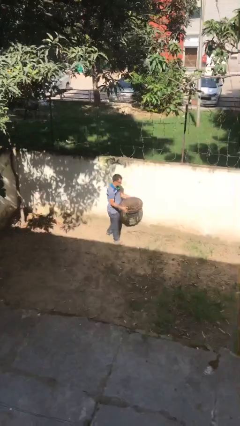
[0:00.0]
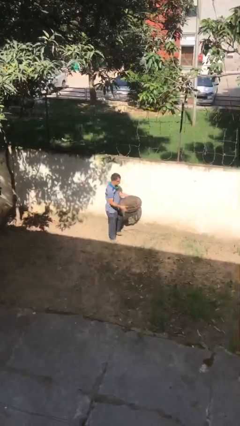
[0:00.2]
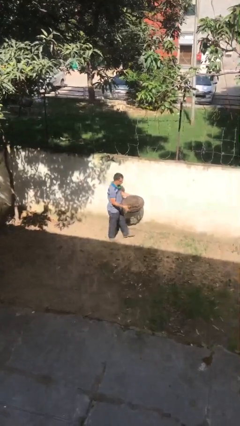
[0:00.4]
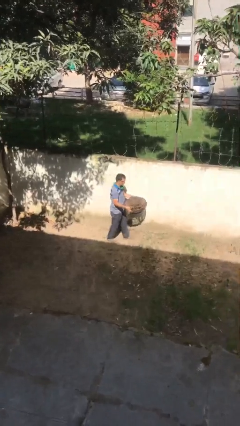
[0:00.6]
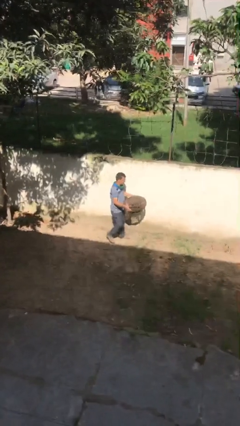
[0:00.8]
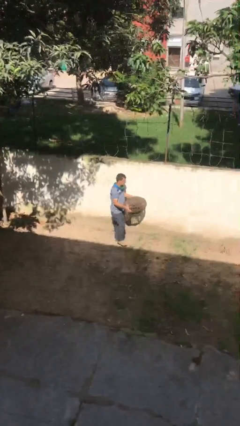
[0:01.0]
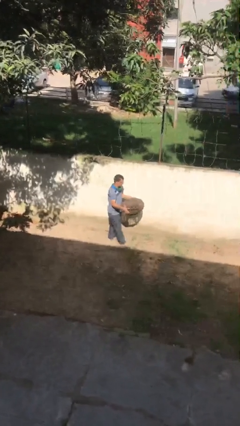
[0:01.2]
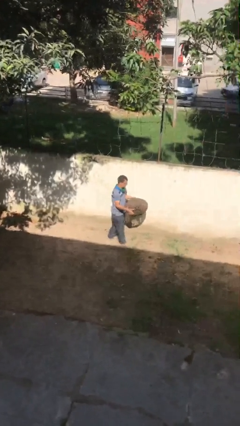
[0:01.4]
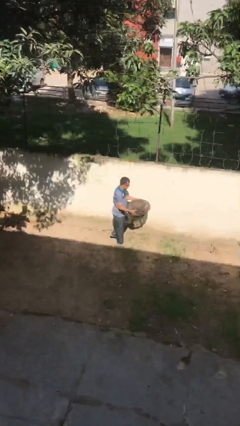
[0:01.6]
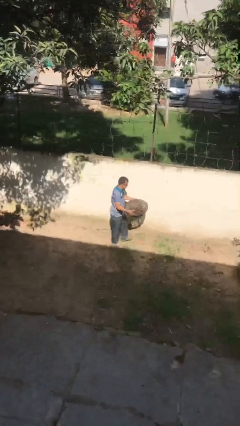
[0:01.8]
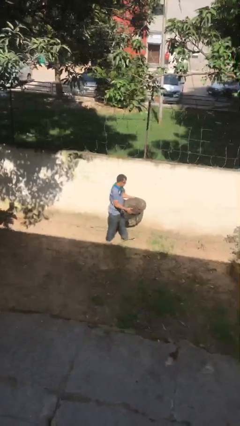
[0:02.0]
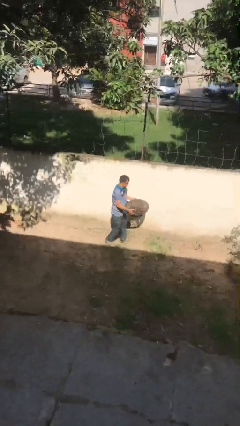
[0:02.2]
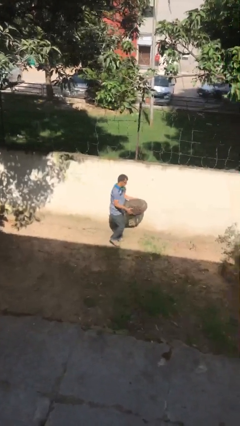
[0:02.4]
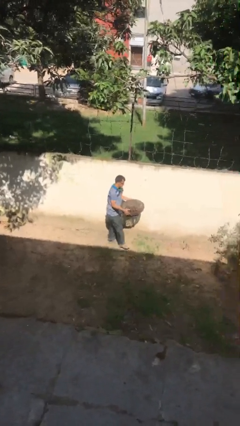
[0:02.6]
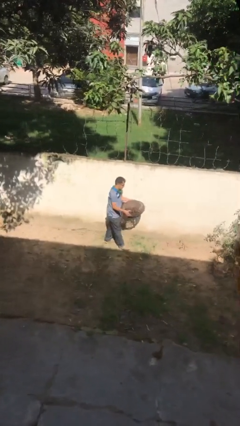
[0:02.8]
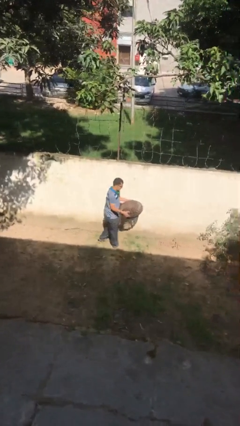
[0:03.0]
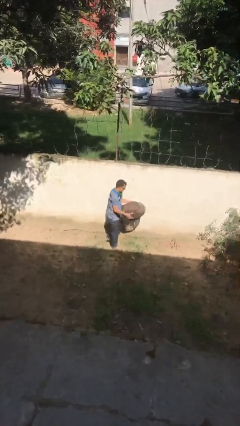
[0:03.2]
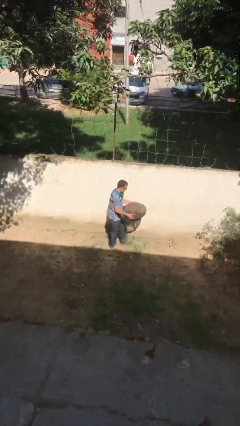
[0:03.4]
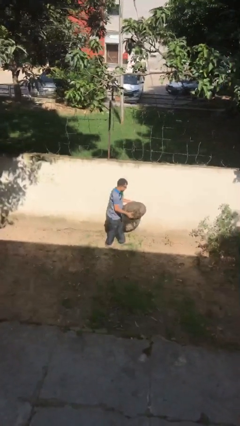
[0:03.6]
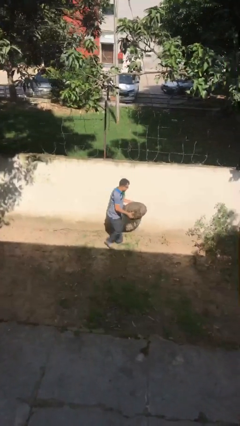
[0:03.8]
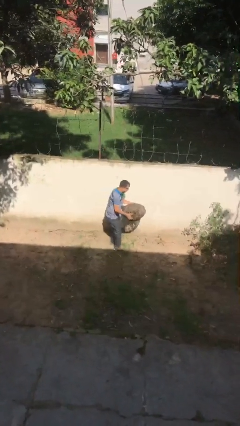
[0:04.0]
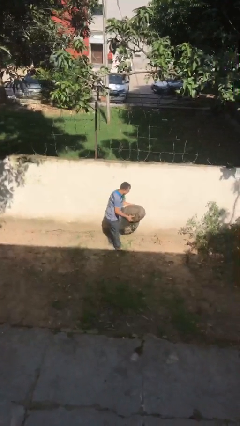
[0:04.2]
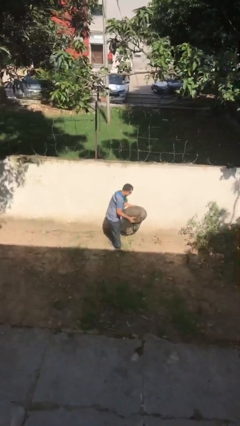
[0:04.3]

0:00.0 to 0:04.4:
person carries heavy object

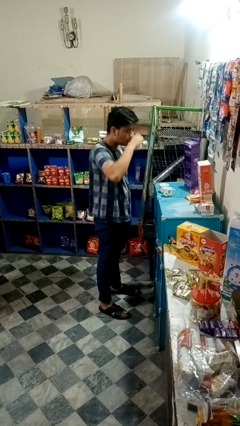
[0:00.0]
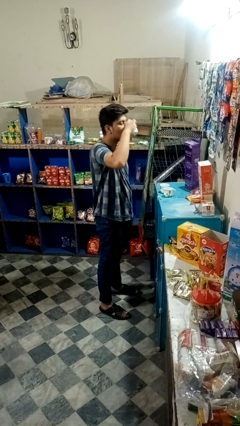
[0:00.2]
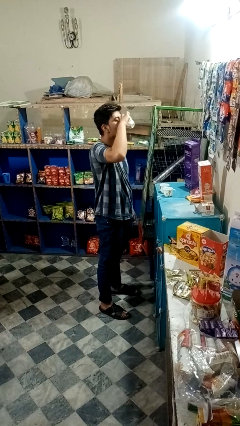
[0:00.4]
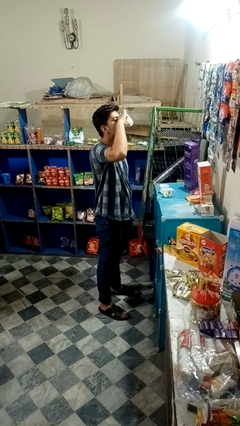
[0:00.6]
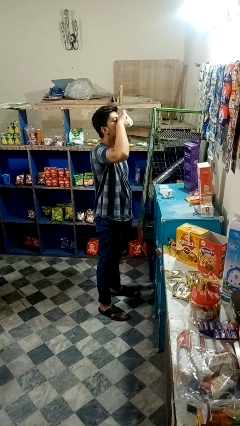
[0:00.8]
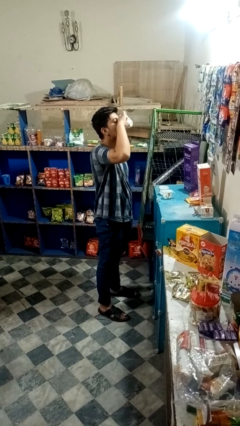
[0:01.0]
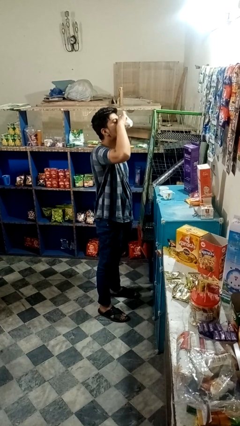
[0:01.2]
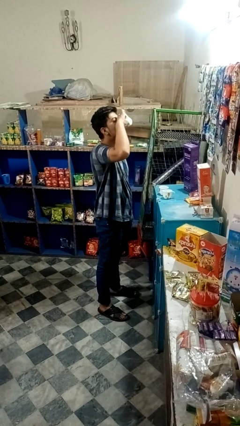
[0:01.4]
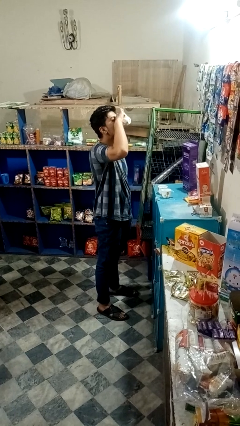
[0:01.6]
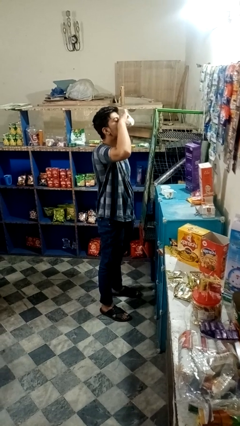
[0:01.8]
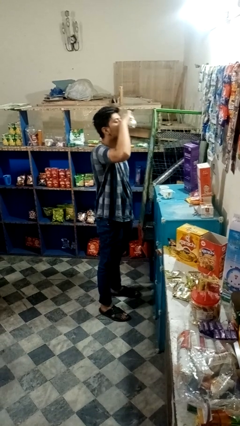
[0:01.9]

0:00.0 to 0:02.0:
person drinks from shotglass

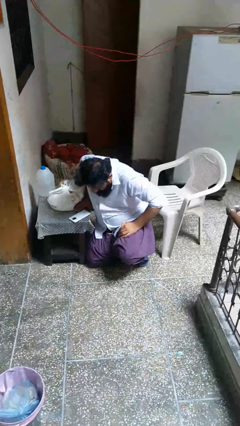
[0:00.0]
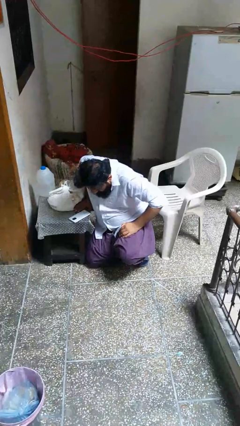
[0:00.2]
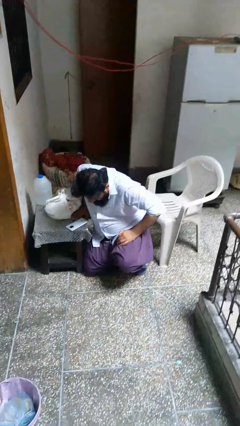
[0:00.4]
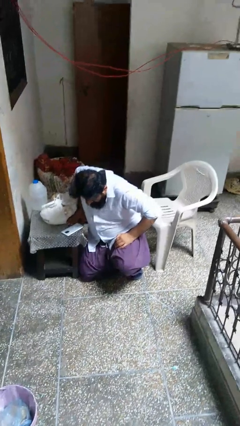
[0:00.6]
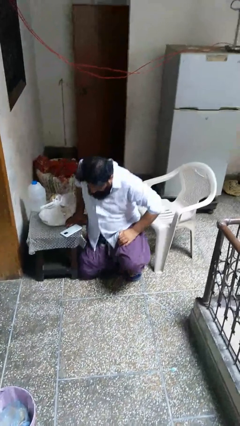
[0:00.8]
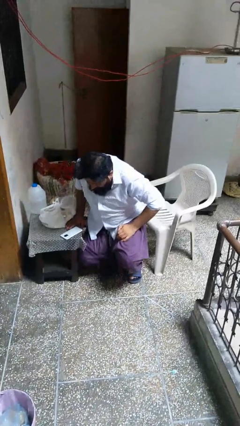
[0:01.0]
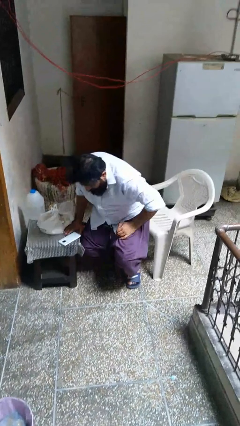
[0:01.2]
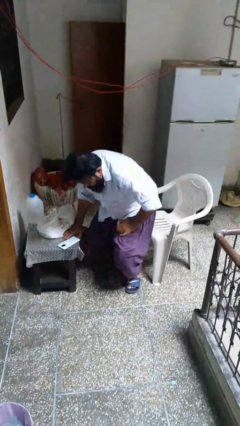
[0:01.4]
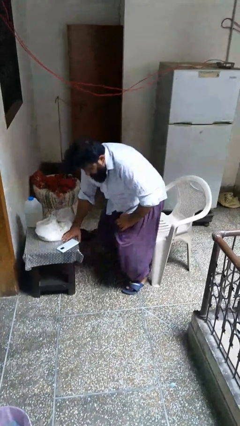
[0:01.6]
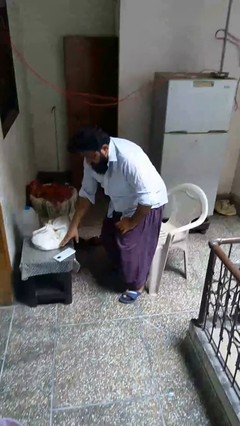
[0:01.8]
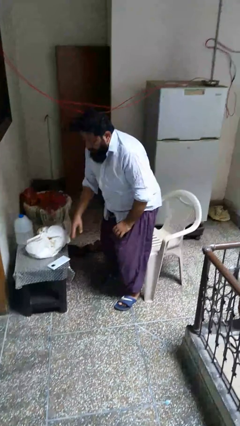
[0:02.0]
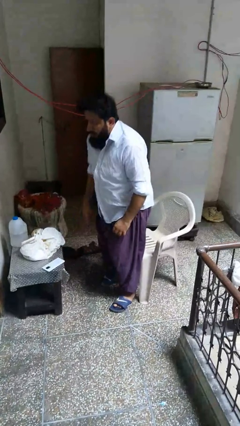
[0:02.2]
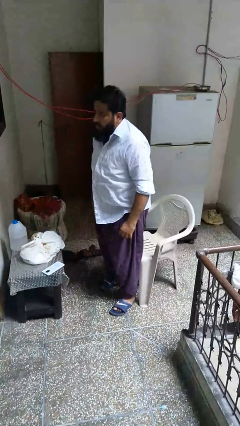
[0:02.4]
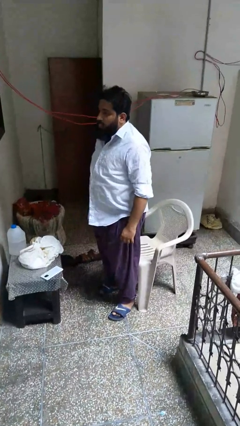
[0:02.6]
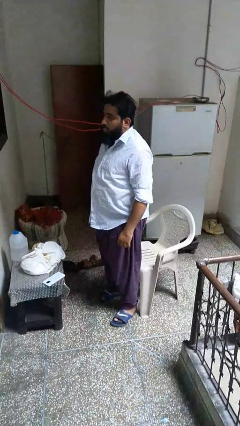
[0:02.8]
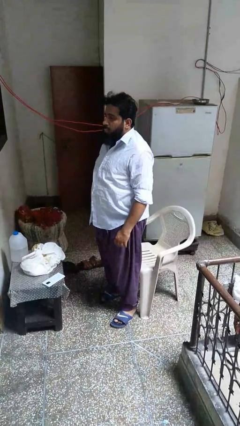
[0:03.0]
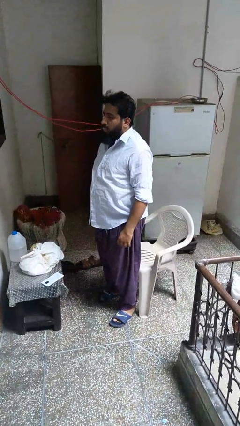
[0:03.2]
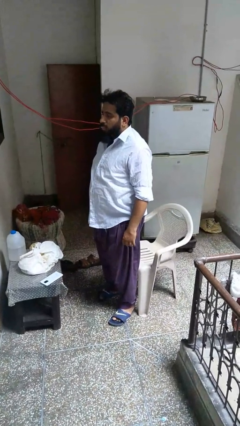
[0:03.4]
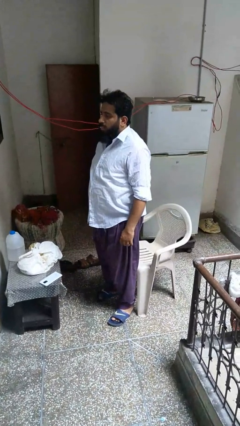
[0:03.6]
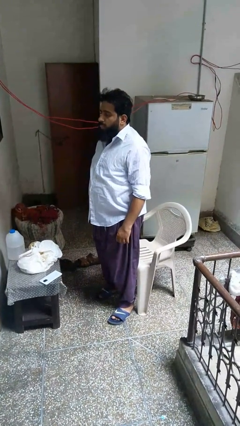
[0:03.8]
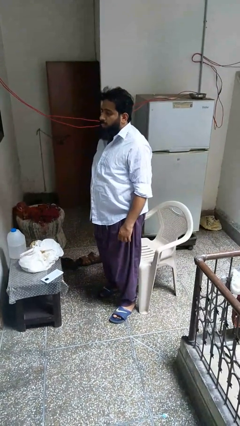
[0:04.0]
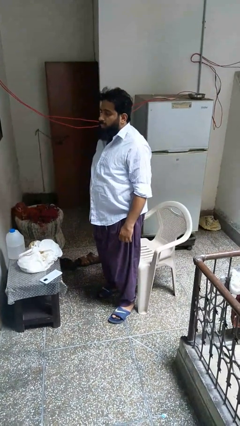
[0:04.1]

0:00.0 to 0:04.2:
person stands up from floor

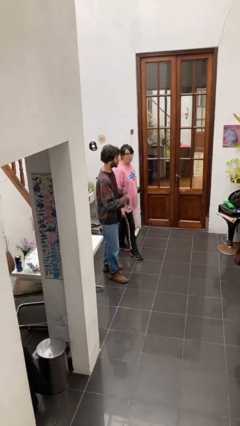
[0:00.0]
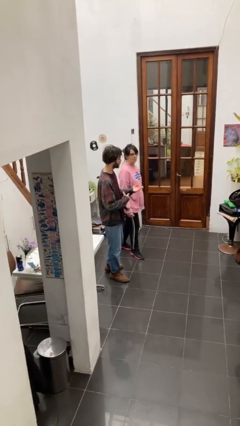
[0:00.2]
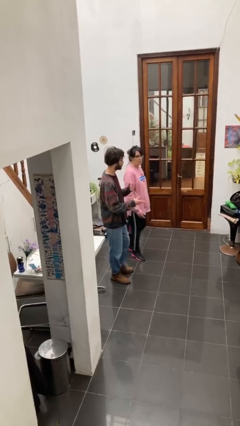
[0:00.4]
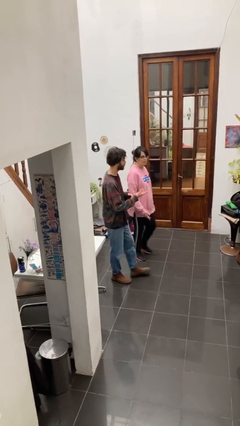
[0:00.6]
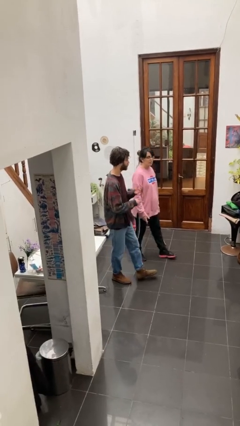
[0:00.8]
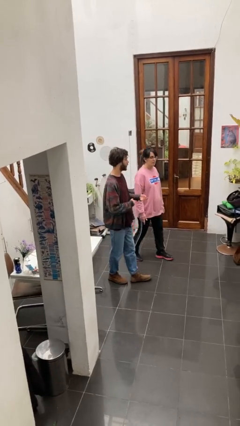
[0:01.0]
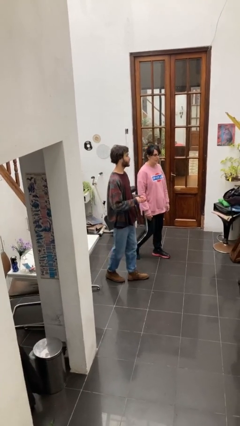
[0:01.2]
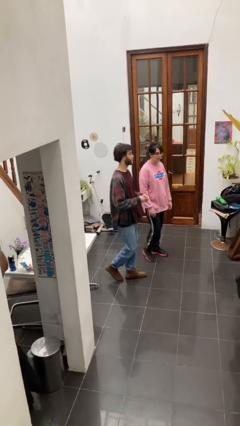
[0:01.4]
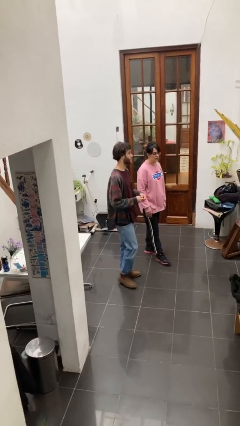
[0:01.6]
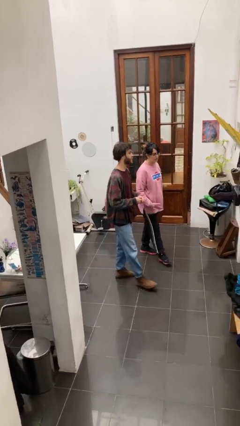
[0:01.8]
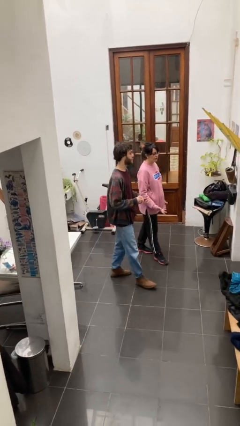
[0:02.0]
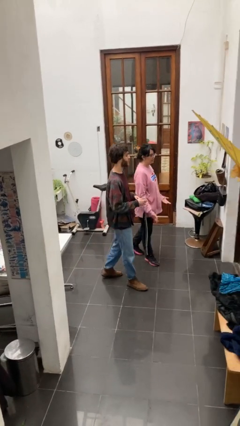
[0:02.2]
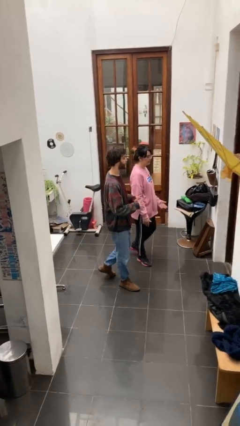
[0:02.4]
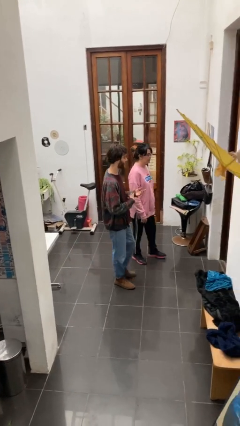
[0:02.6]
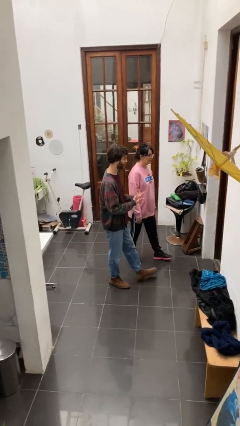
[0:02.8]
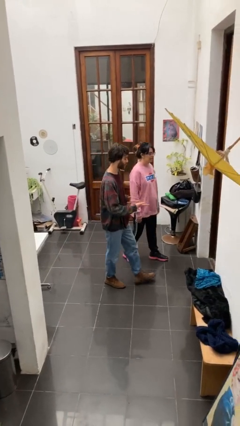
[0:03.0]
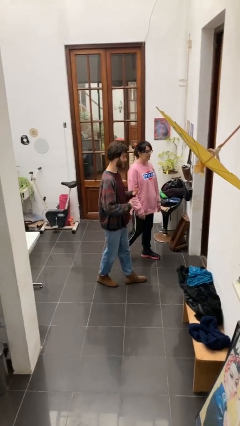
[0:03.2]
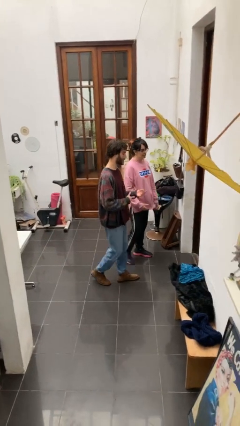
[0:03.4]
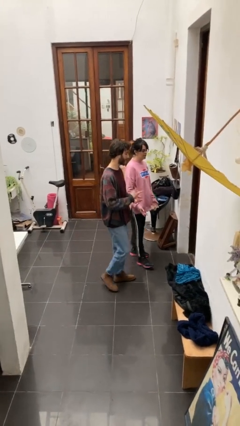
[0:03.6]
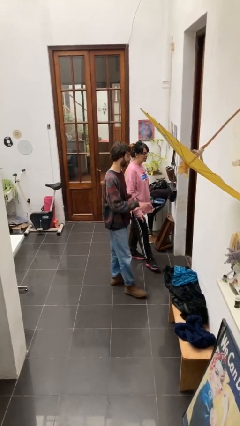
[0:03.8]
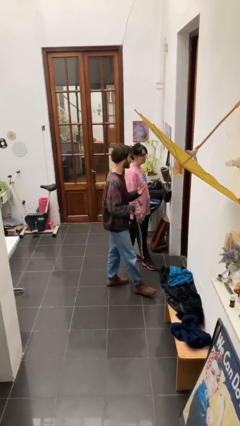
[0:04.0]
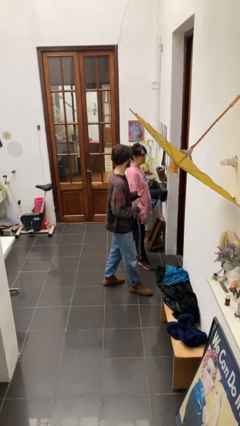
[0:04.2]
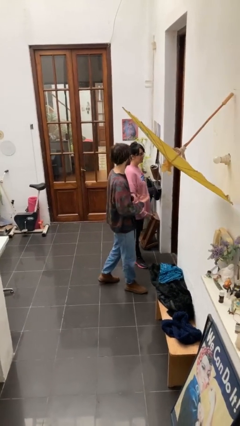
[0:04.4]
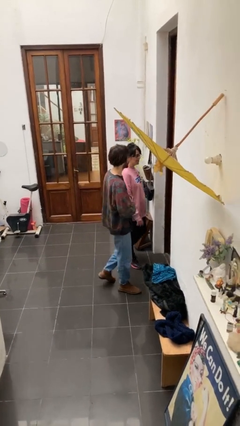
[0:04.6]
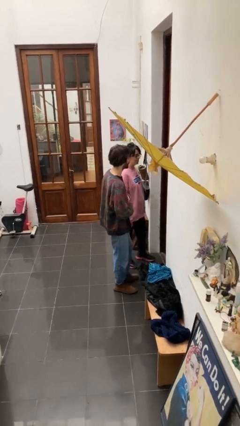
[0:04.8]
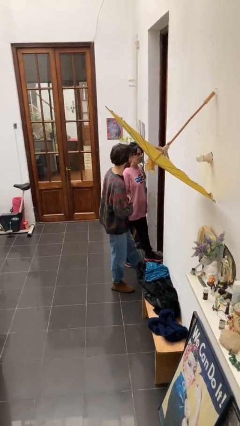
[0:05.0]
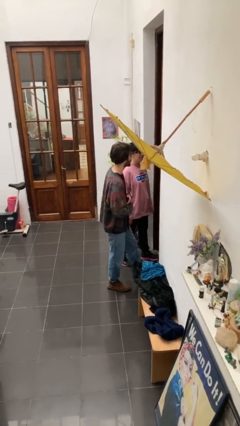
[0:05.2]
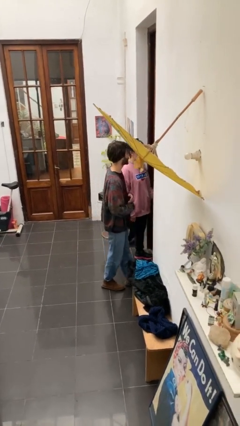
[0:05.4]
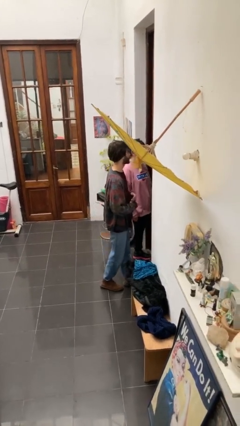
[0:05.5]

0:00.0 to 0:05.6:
person talks to person

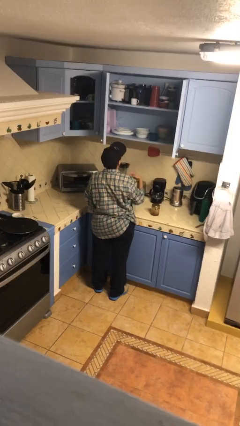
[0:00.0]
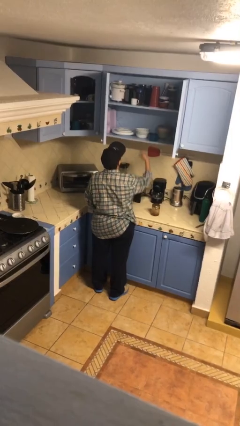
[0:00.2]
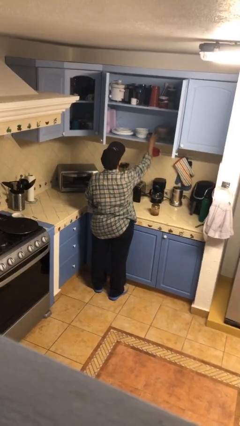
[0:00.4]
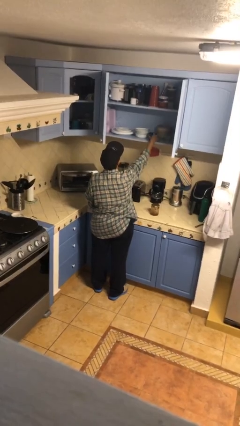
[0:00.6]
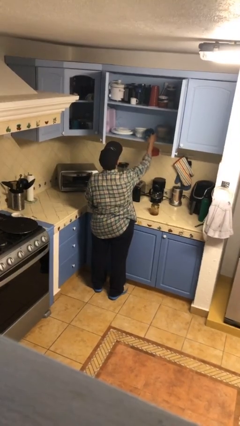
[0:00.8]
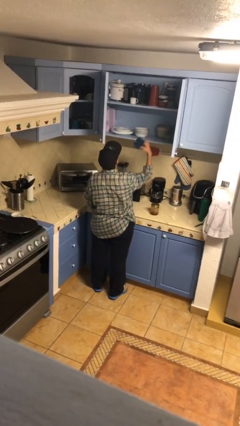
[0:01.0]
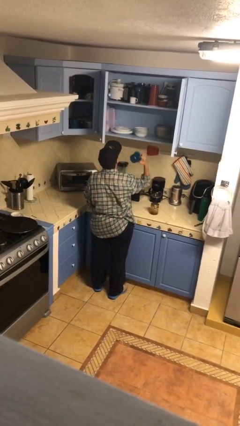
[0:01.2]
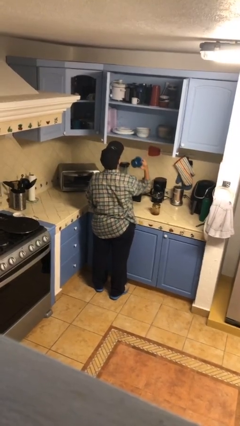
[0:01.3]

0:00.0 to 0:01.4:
person picks up object from cabinet
